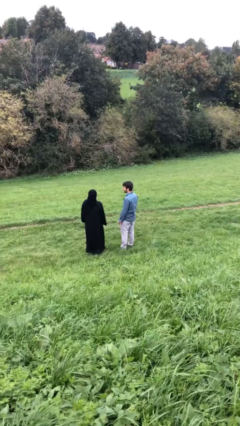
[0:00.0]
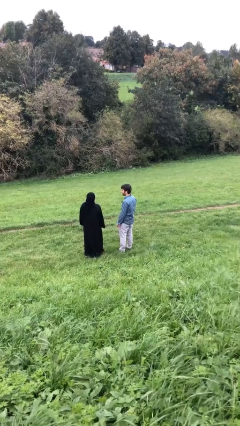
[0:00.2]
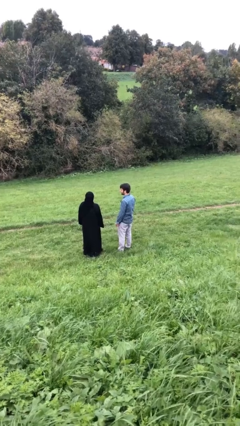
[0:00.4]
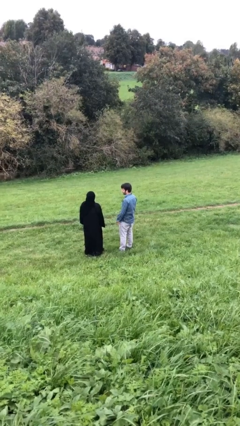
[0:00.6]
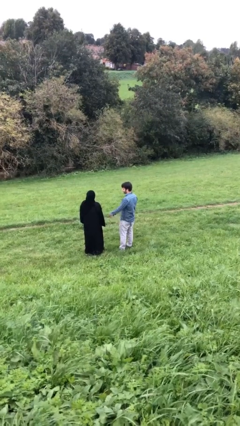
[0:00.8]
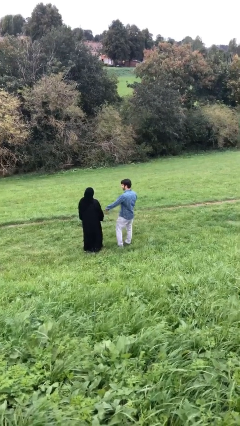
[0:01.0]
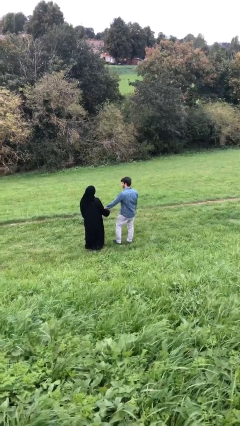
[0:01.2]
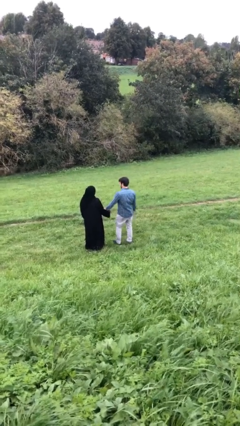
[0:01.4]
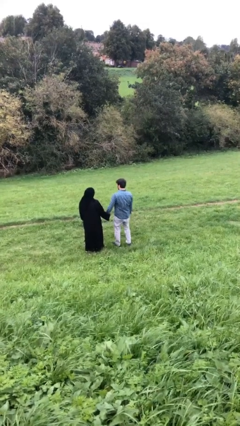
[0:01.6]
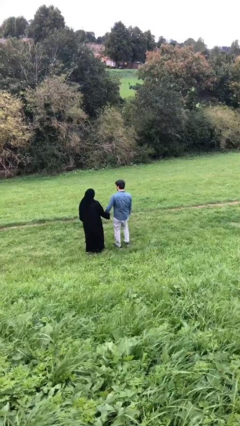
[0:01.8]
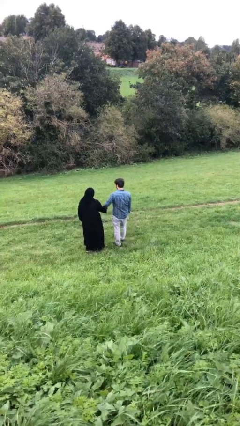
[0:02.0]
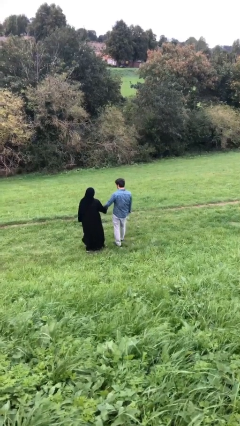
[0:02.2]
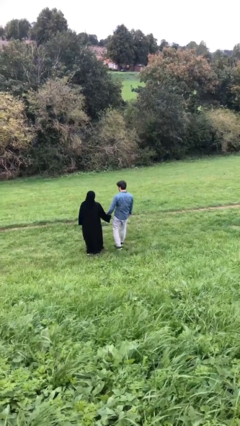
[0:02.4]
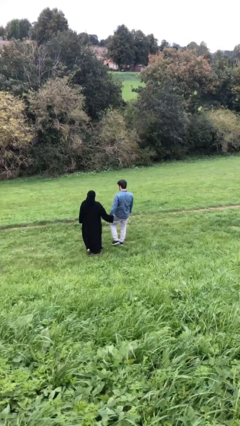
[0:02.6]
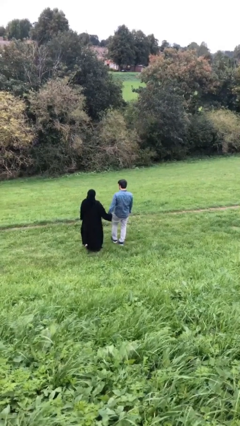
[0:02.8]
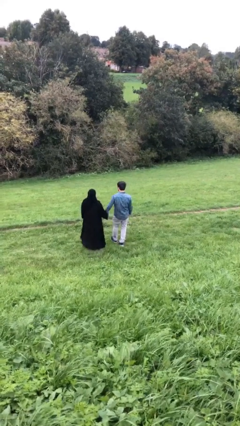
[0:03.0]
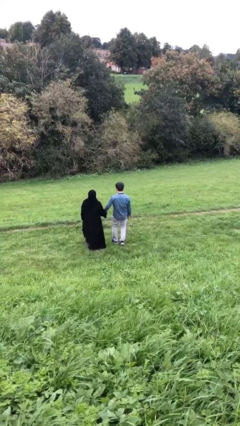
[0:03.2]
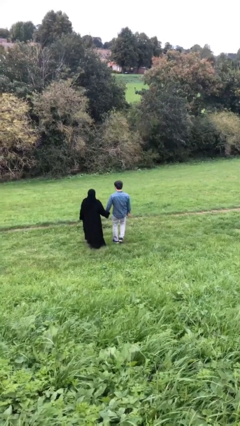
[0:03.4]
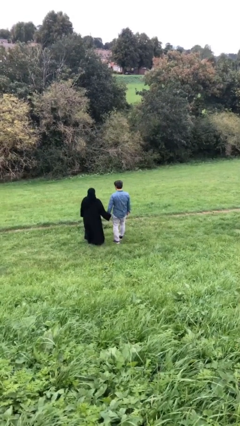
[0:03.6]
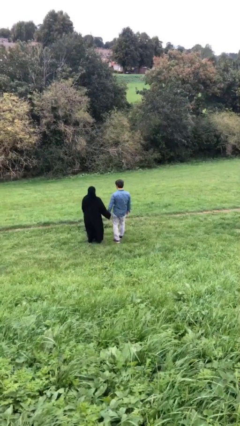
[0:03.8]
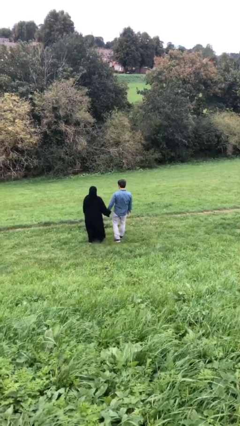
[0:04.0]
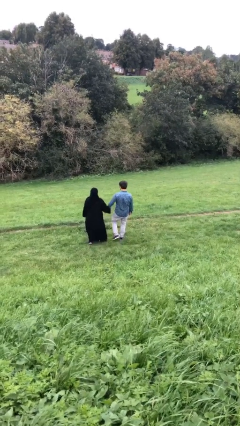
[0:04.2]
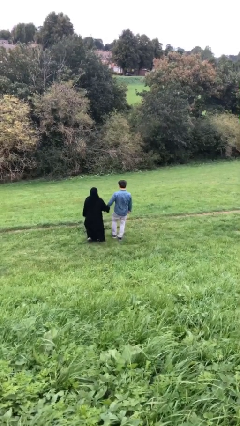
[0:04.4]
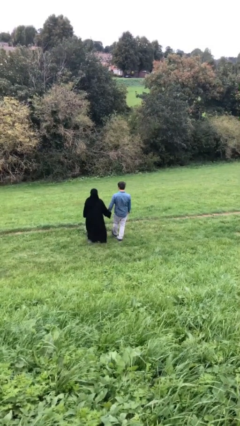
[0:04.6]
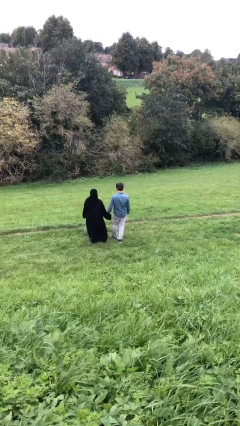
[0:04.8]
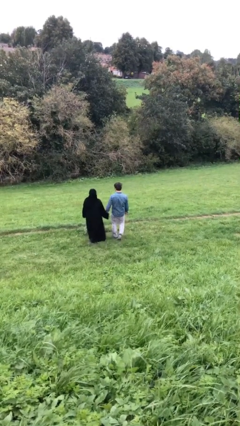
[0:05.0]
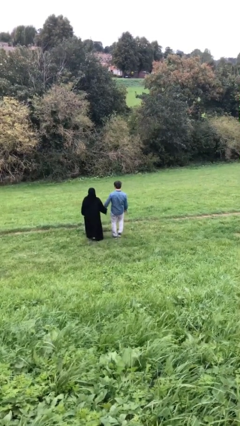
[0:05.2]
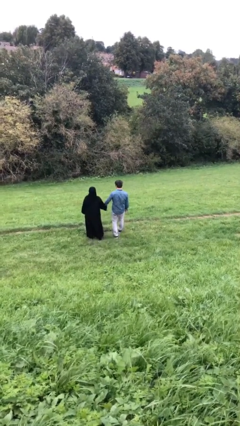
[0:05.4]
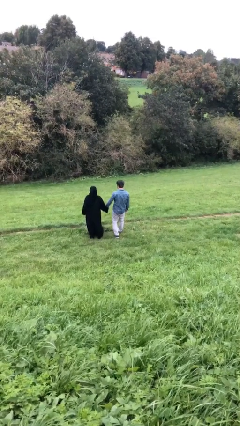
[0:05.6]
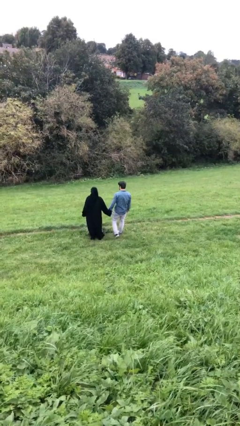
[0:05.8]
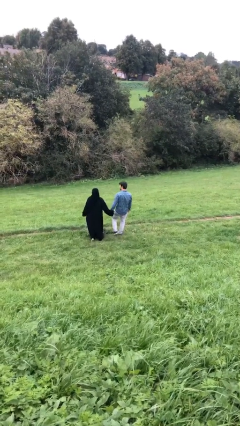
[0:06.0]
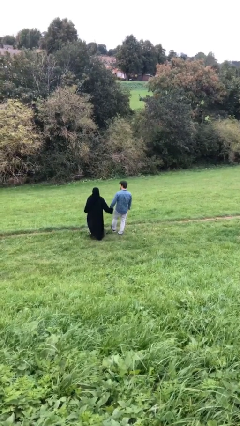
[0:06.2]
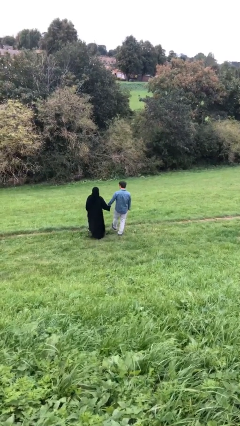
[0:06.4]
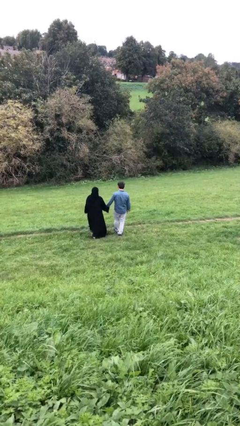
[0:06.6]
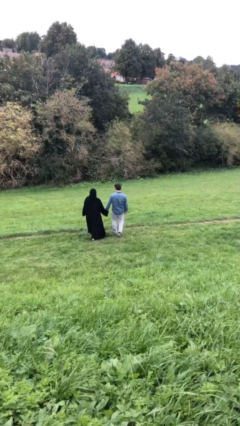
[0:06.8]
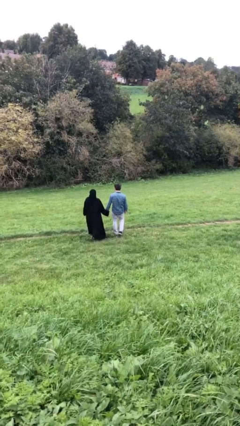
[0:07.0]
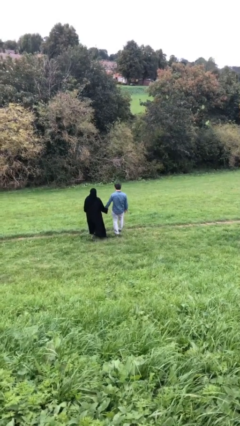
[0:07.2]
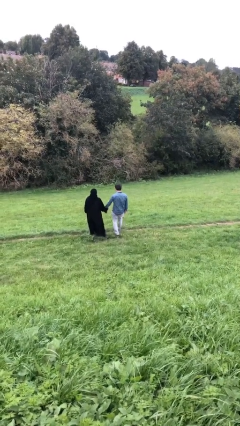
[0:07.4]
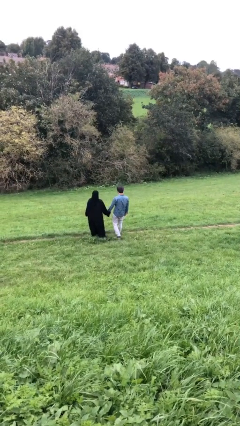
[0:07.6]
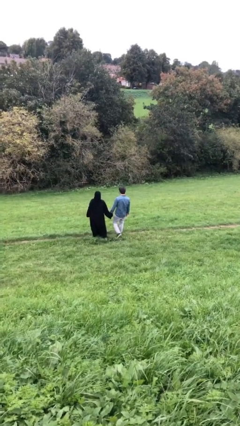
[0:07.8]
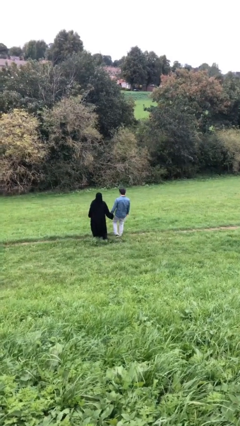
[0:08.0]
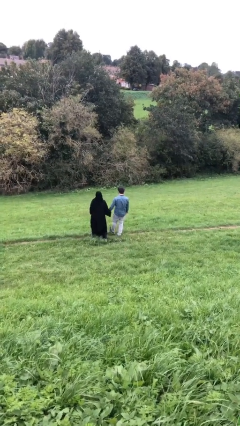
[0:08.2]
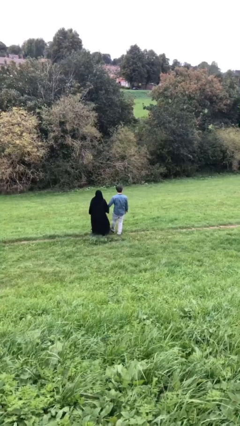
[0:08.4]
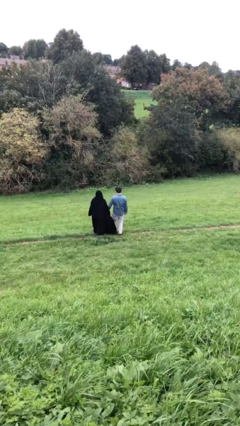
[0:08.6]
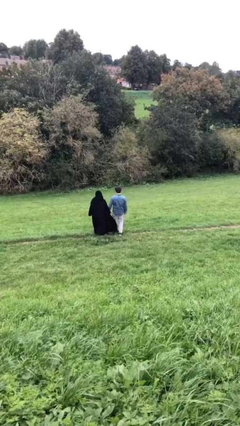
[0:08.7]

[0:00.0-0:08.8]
person holds hand

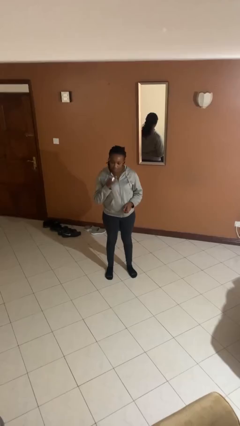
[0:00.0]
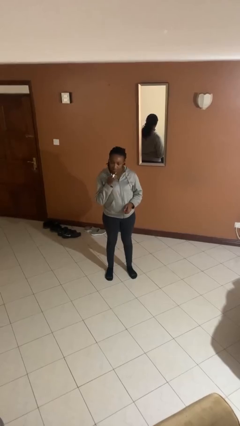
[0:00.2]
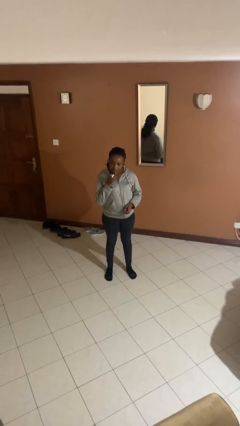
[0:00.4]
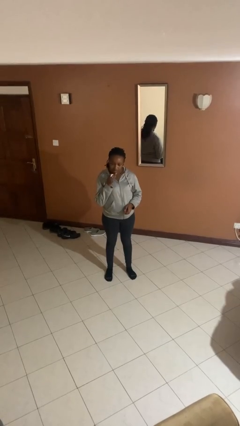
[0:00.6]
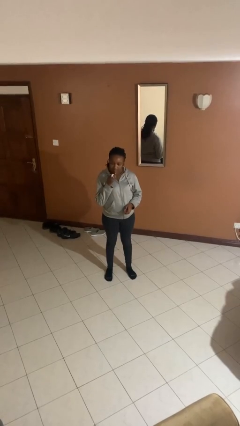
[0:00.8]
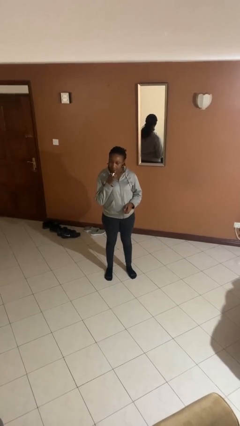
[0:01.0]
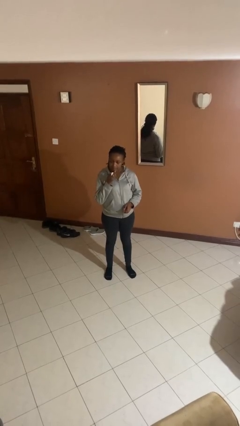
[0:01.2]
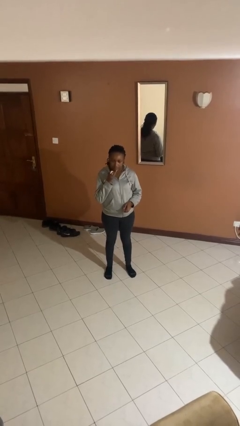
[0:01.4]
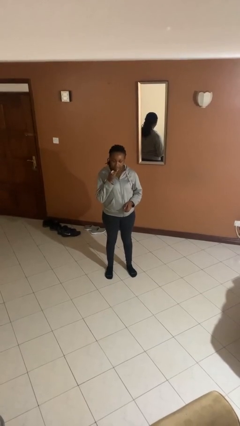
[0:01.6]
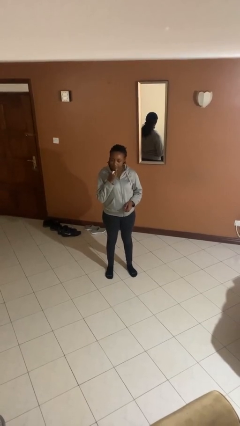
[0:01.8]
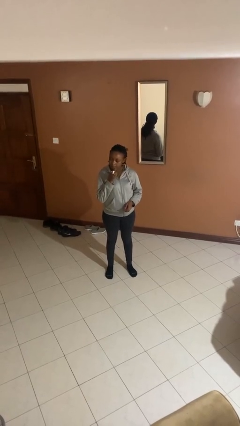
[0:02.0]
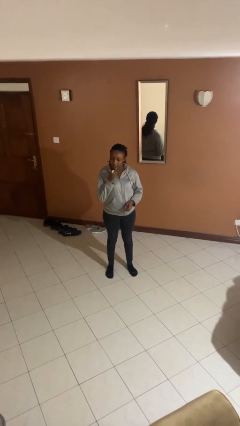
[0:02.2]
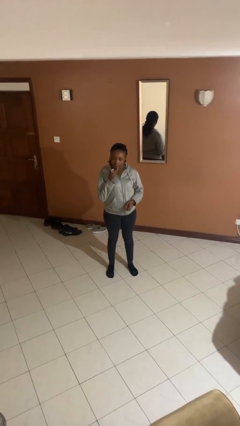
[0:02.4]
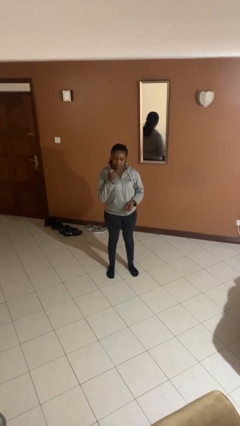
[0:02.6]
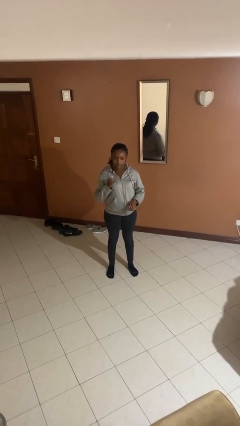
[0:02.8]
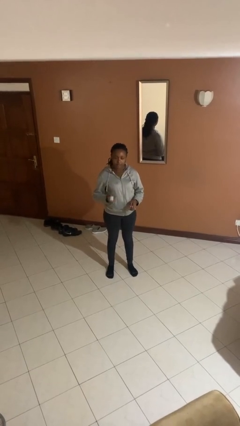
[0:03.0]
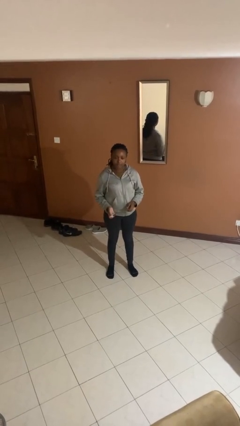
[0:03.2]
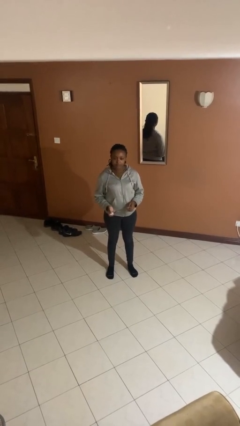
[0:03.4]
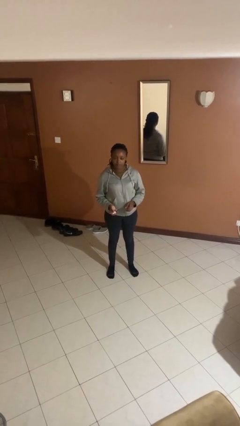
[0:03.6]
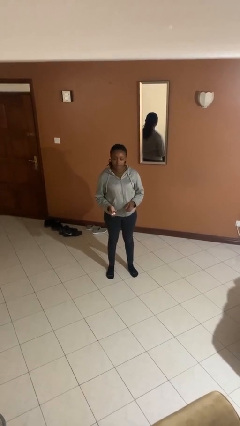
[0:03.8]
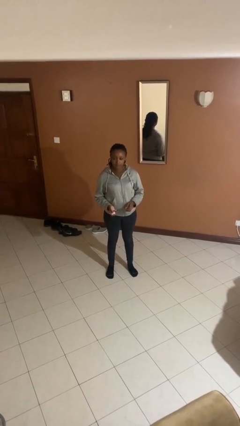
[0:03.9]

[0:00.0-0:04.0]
person applies lip makeup

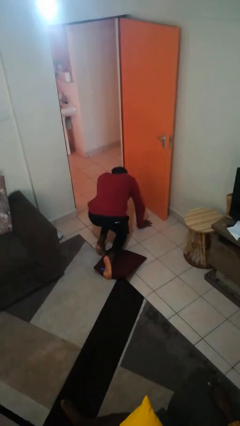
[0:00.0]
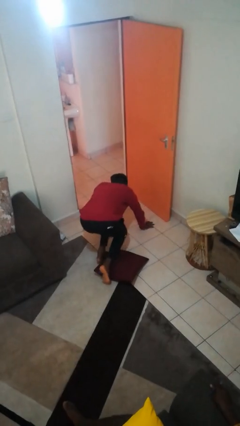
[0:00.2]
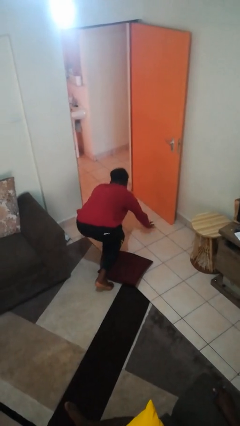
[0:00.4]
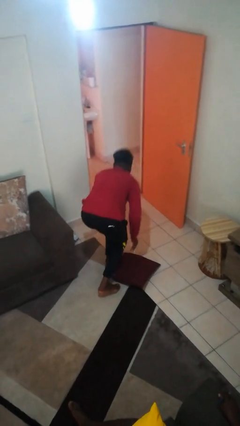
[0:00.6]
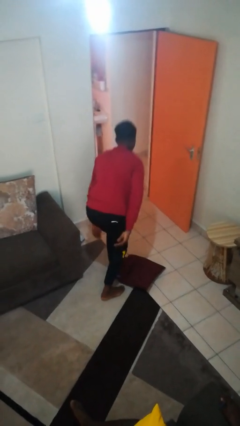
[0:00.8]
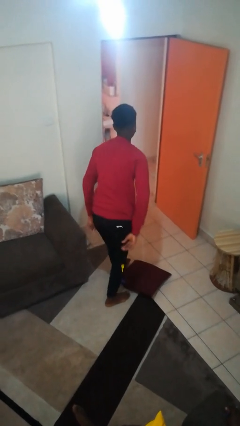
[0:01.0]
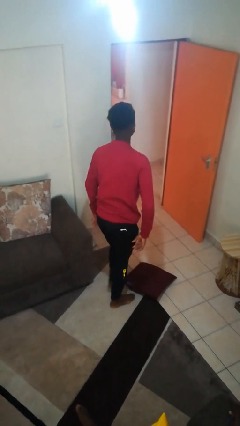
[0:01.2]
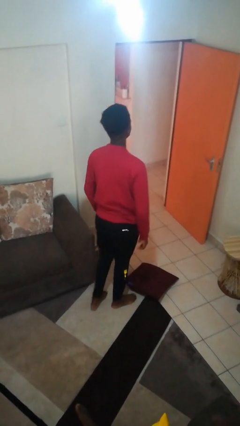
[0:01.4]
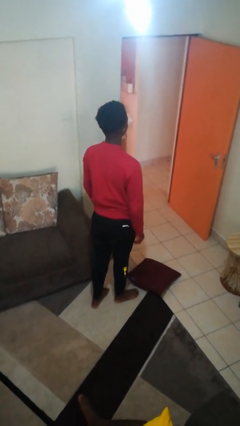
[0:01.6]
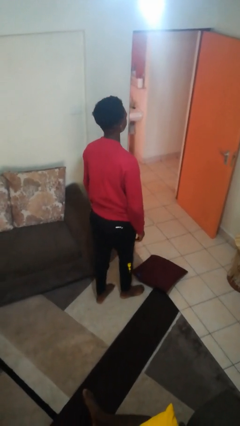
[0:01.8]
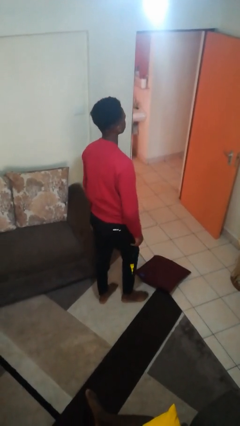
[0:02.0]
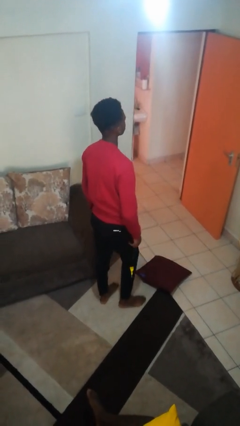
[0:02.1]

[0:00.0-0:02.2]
person stands up from floor

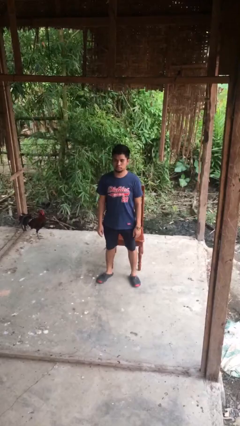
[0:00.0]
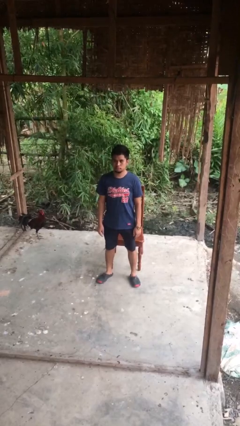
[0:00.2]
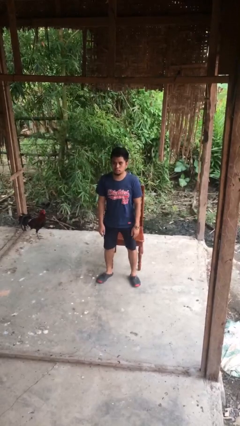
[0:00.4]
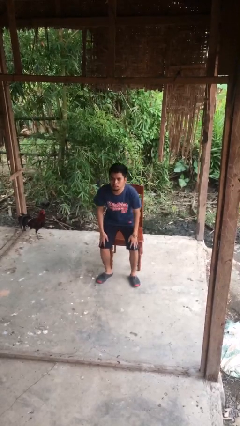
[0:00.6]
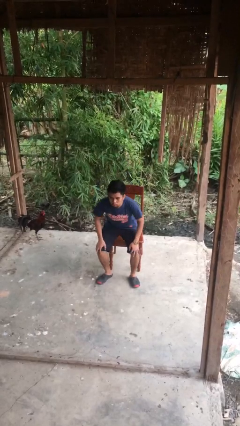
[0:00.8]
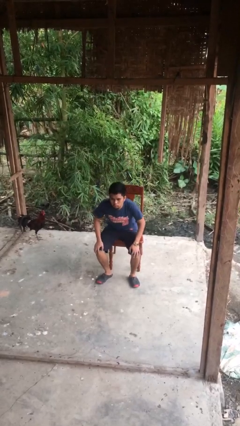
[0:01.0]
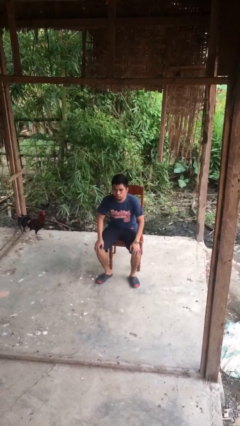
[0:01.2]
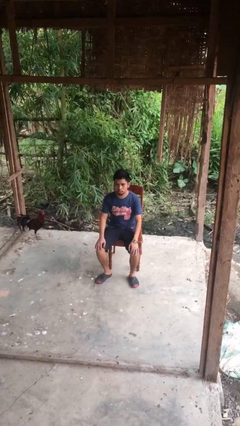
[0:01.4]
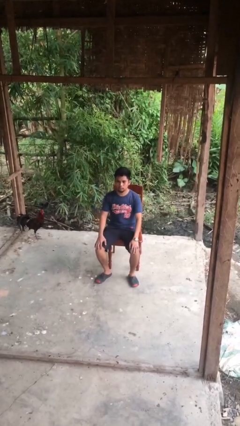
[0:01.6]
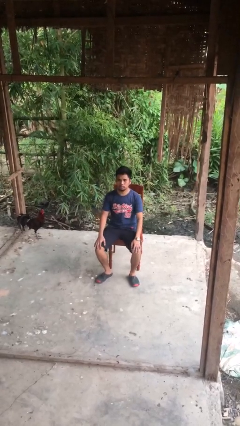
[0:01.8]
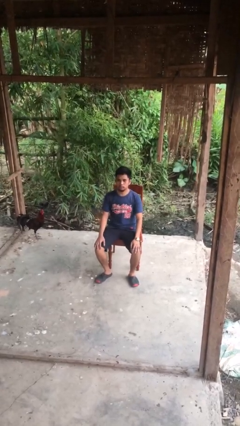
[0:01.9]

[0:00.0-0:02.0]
person sits down

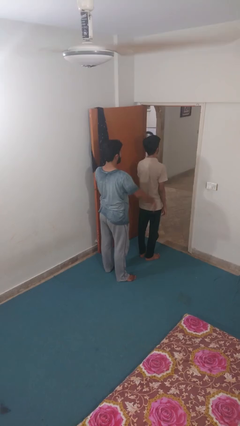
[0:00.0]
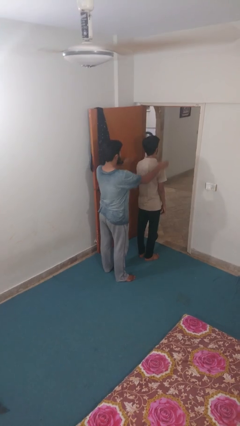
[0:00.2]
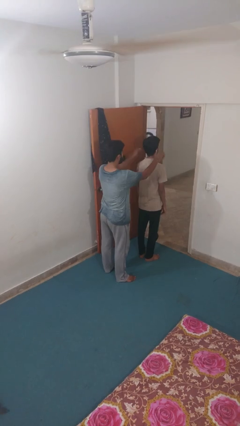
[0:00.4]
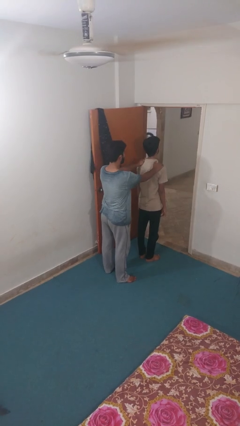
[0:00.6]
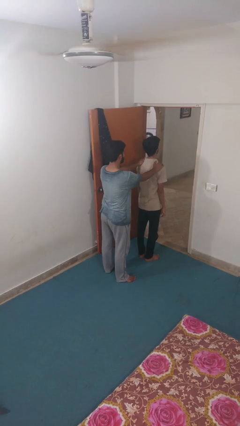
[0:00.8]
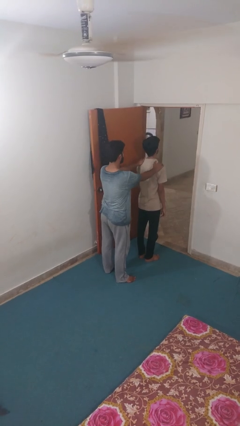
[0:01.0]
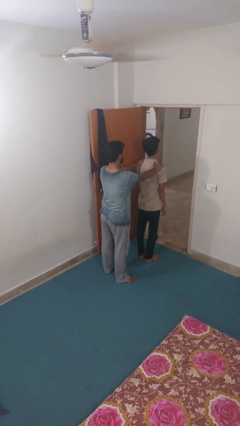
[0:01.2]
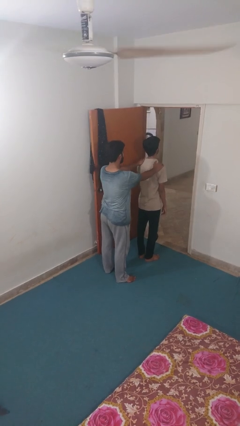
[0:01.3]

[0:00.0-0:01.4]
person grabs person by shoulder
